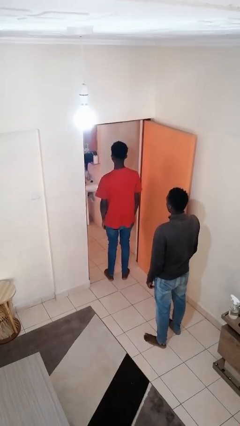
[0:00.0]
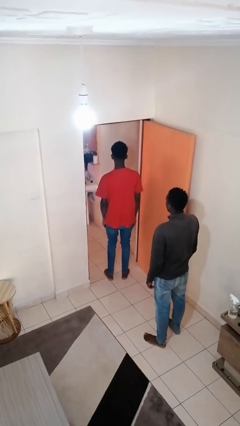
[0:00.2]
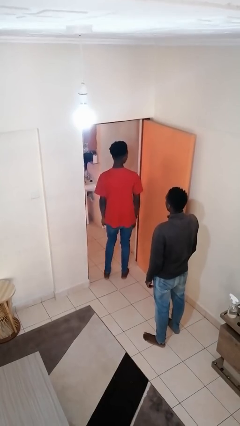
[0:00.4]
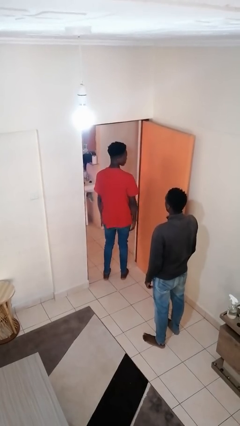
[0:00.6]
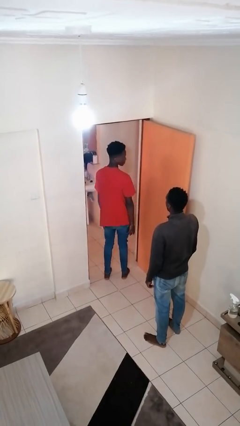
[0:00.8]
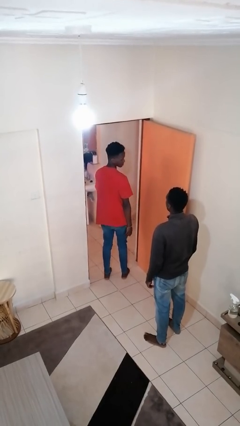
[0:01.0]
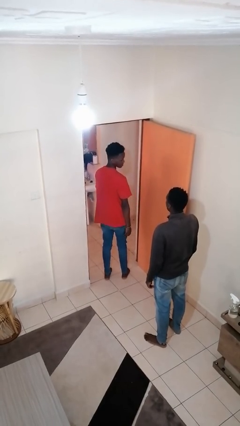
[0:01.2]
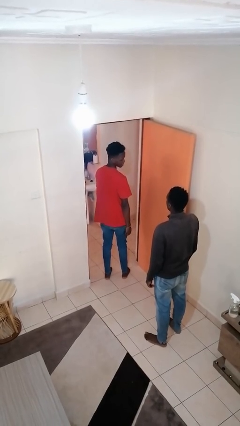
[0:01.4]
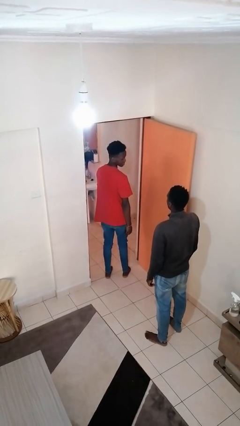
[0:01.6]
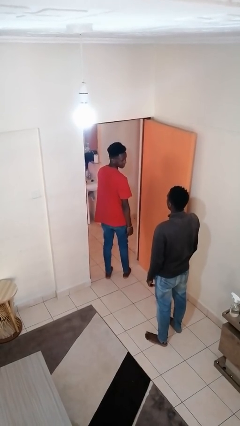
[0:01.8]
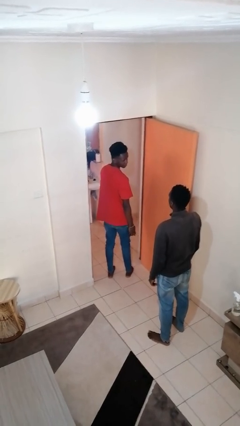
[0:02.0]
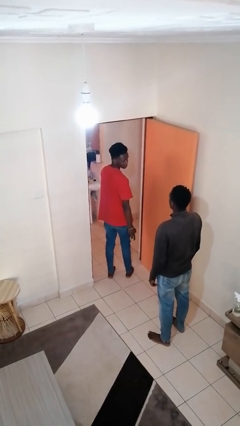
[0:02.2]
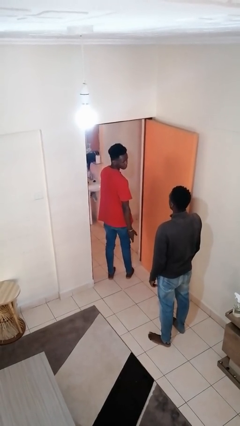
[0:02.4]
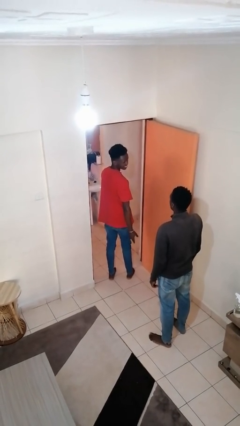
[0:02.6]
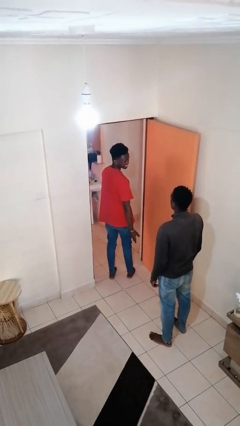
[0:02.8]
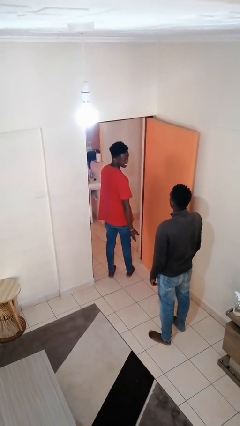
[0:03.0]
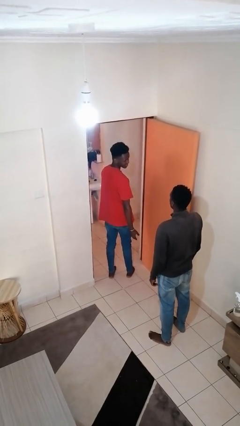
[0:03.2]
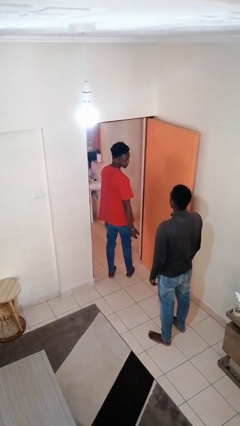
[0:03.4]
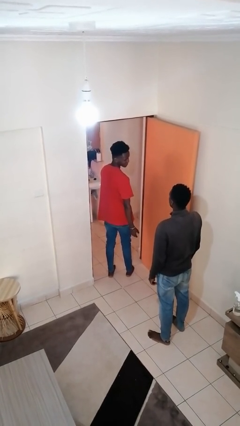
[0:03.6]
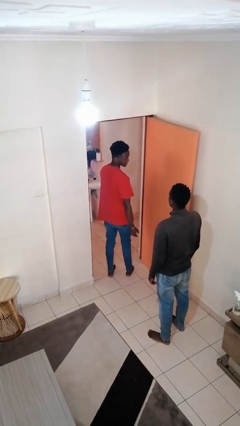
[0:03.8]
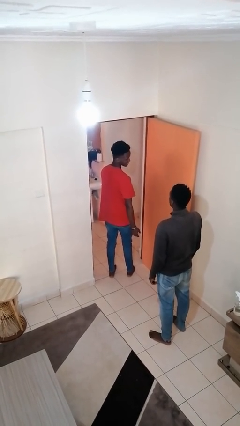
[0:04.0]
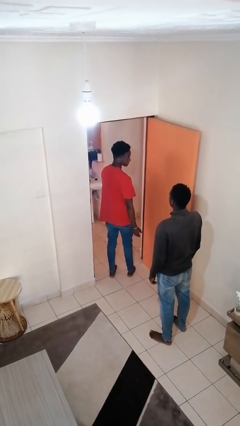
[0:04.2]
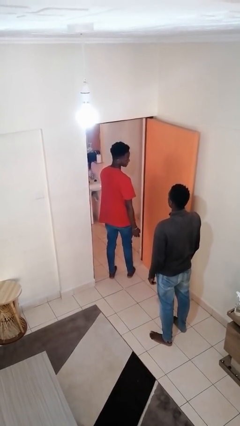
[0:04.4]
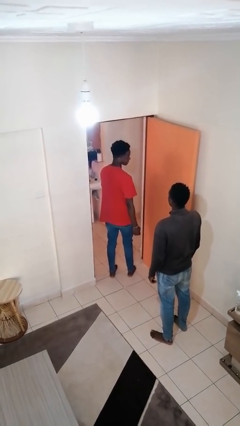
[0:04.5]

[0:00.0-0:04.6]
person looks over shoulder

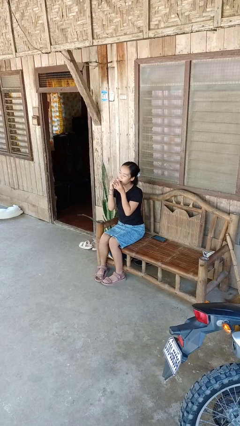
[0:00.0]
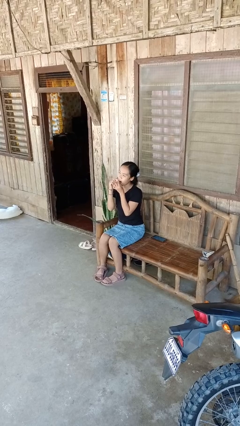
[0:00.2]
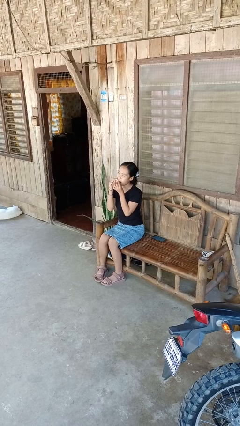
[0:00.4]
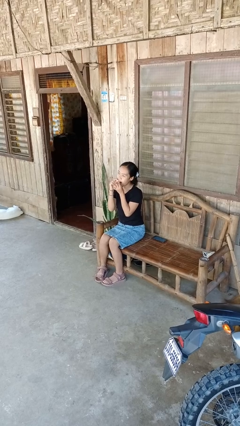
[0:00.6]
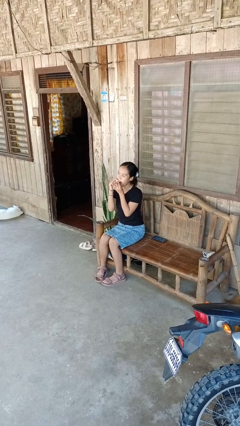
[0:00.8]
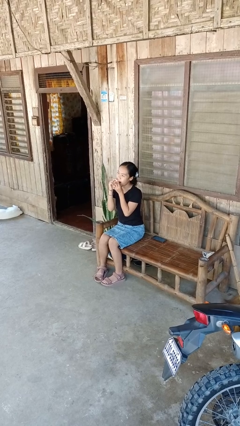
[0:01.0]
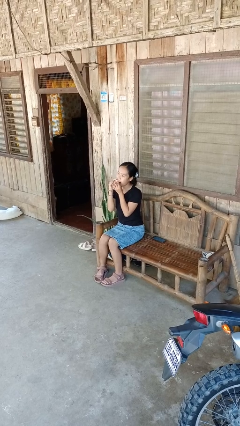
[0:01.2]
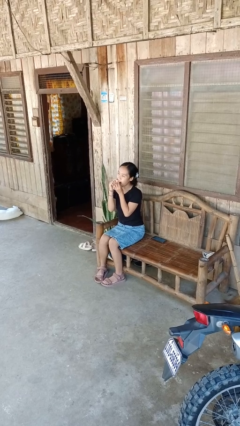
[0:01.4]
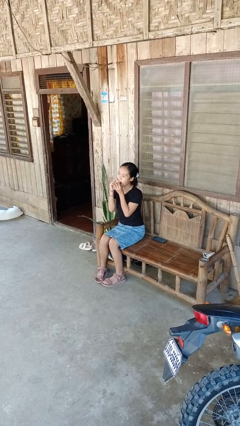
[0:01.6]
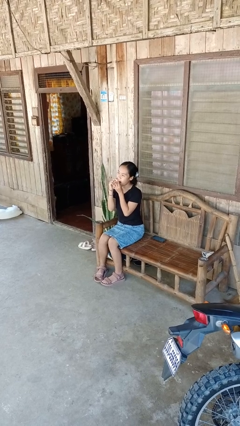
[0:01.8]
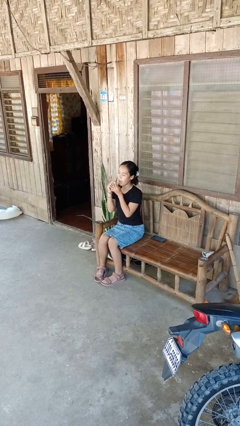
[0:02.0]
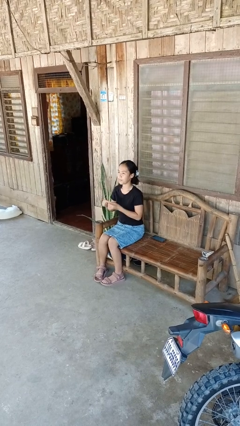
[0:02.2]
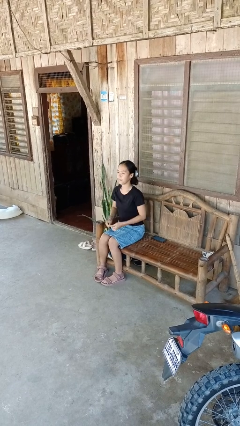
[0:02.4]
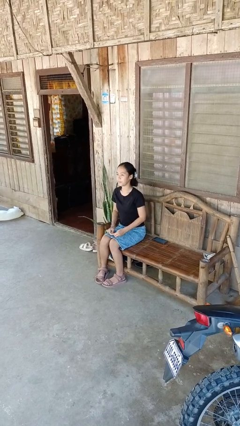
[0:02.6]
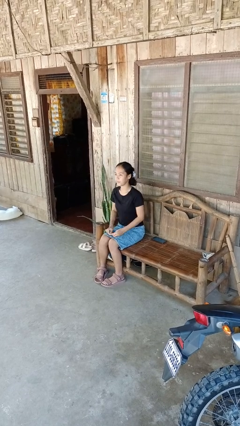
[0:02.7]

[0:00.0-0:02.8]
person flosses

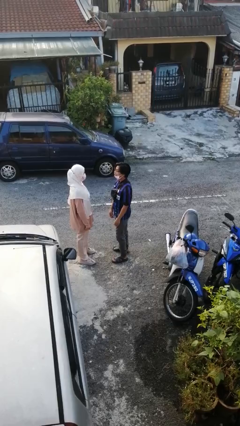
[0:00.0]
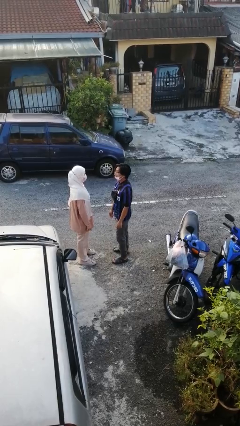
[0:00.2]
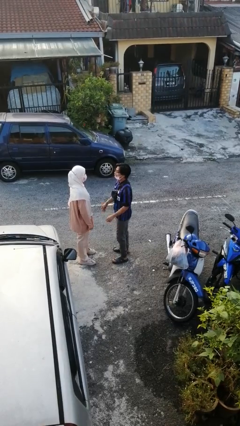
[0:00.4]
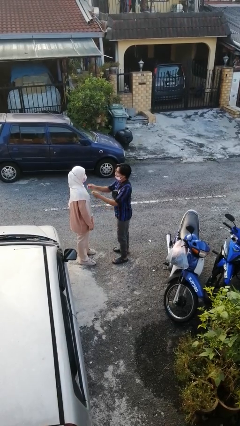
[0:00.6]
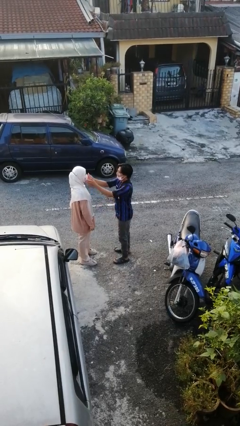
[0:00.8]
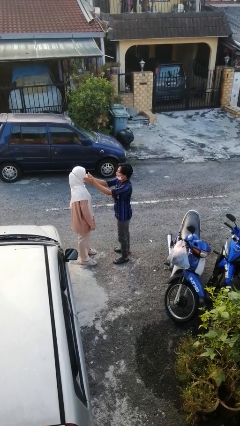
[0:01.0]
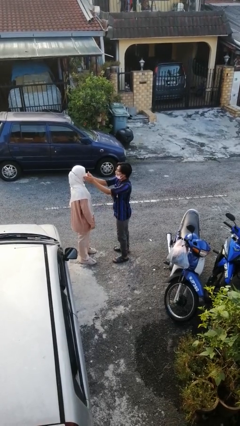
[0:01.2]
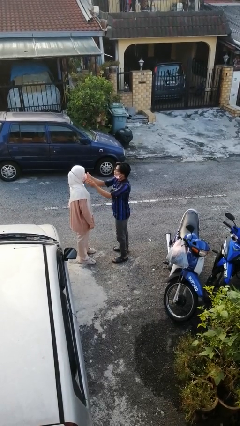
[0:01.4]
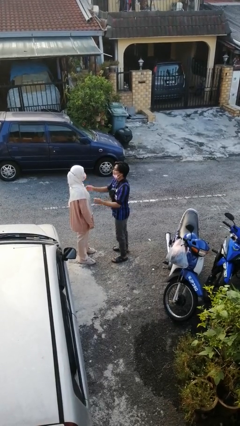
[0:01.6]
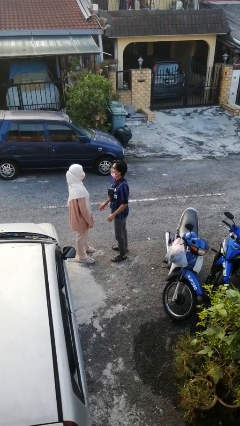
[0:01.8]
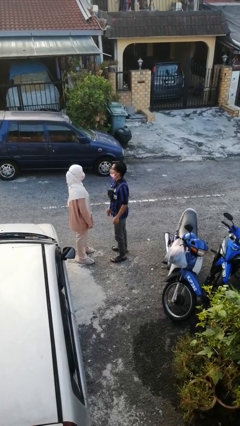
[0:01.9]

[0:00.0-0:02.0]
person touches face of person

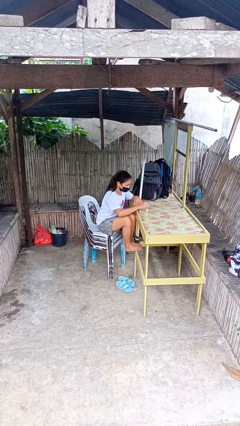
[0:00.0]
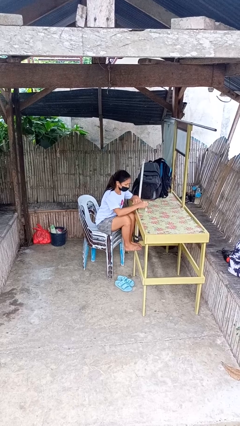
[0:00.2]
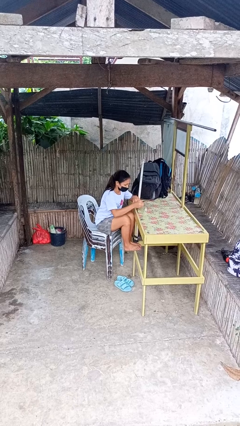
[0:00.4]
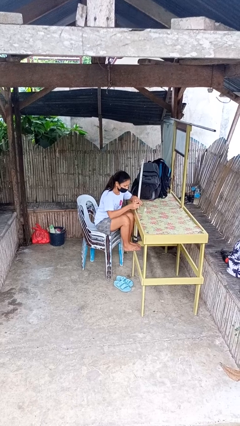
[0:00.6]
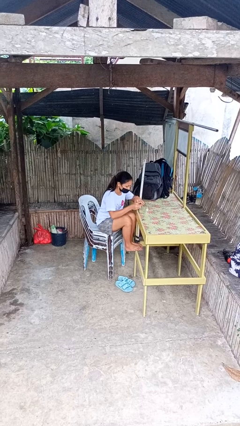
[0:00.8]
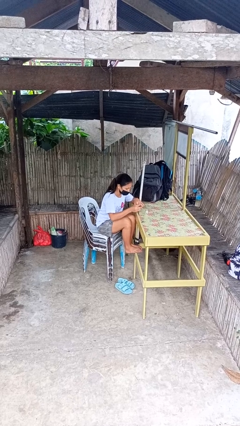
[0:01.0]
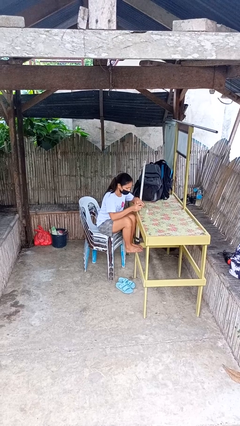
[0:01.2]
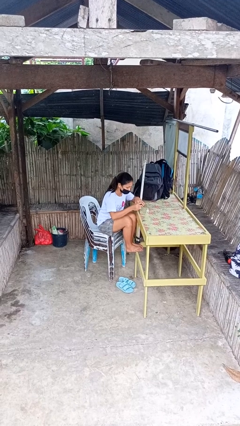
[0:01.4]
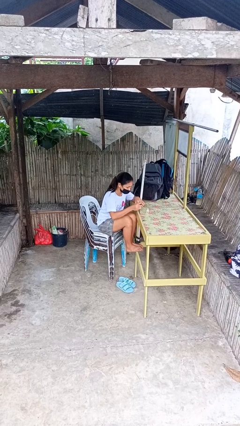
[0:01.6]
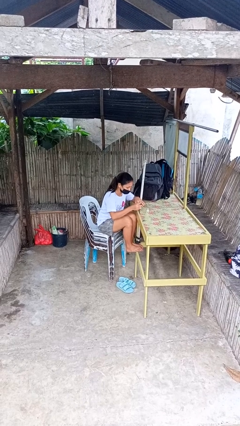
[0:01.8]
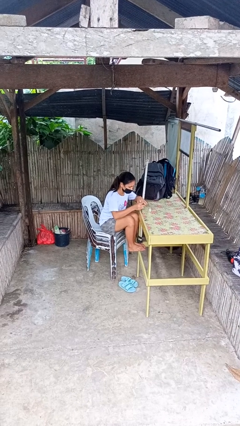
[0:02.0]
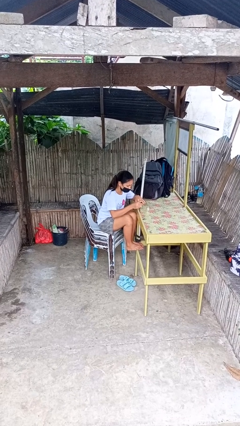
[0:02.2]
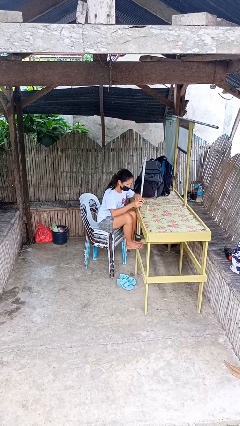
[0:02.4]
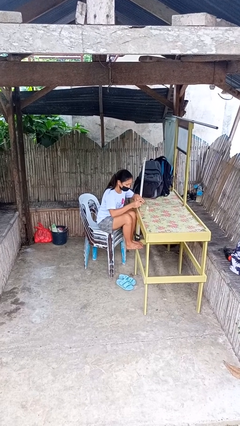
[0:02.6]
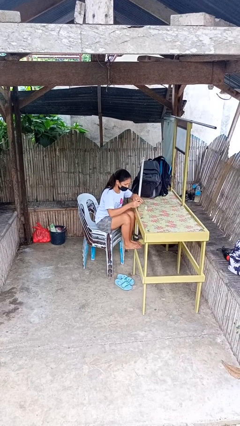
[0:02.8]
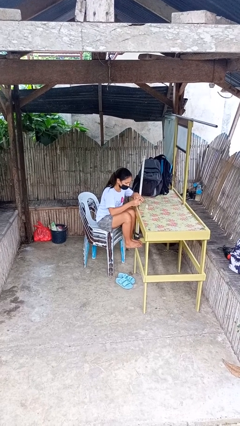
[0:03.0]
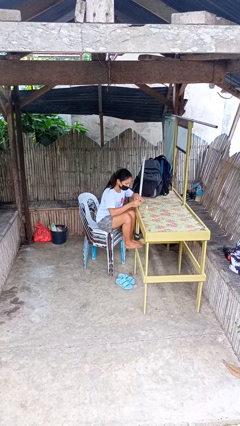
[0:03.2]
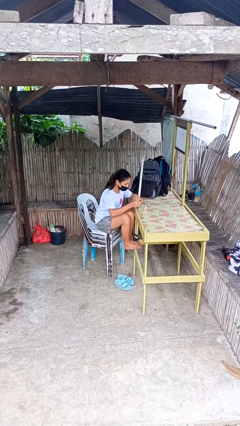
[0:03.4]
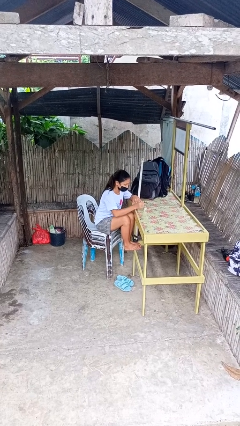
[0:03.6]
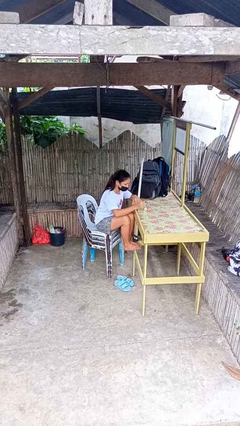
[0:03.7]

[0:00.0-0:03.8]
person paints fingernails

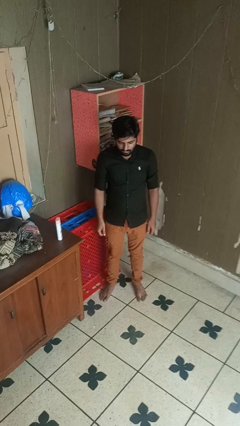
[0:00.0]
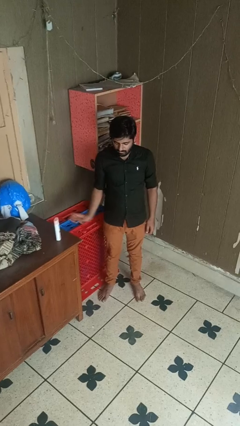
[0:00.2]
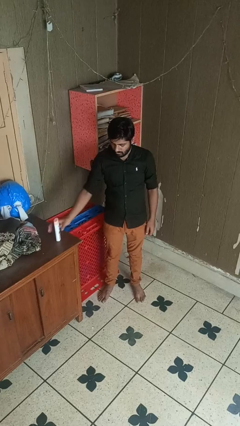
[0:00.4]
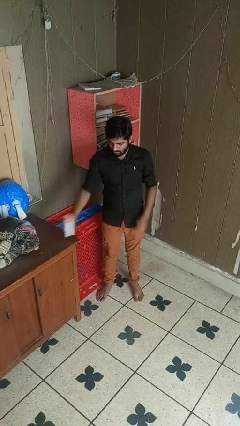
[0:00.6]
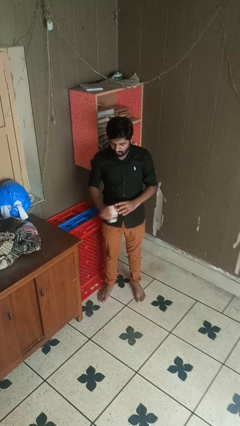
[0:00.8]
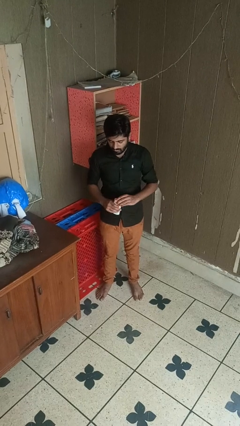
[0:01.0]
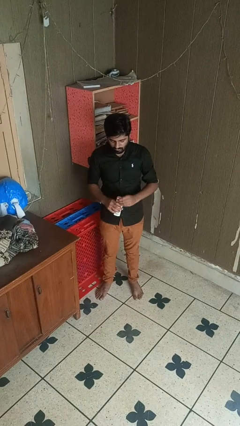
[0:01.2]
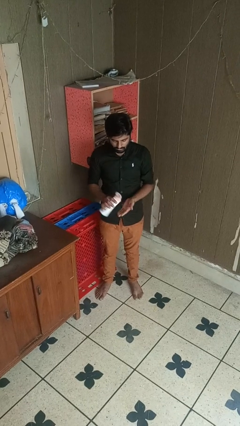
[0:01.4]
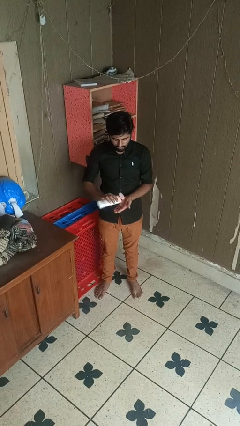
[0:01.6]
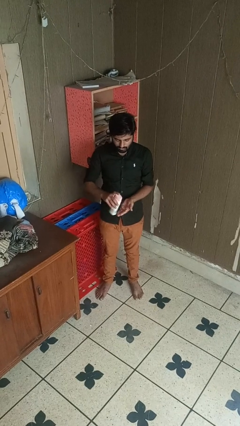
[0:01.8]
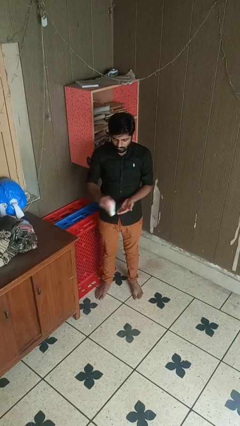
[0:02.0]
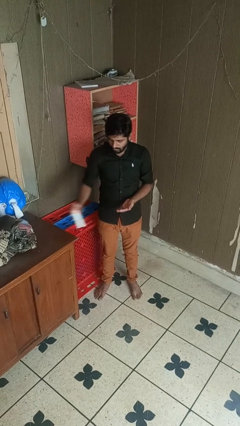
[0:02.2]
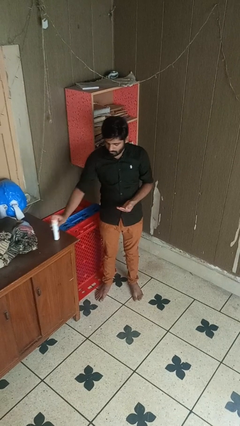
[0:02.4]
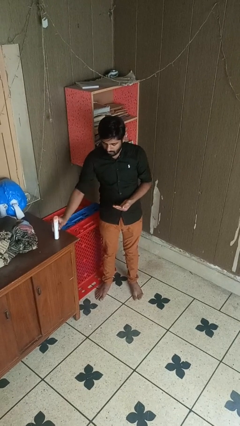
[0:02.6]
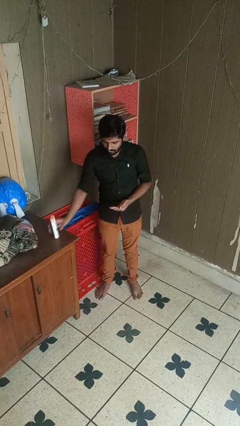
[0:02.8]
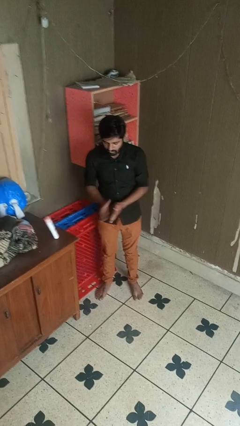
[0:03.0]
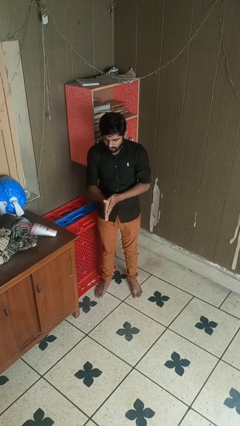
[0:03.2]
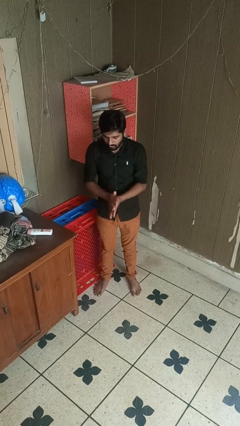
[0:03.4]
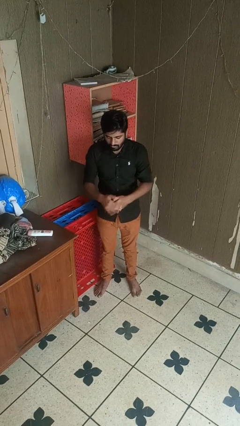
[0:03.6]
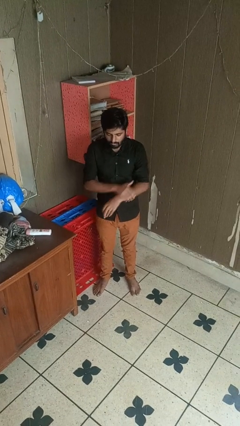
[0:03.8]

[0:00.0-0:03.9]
person applies facial moisturizer

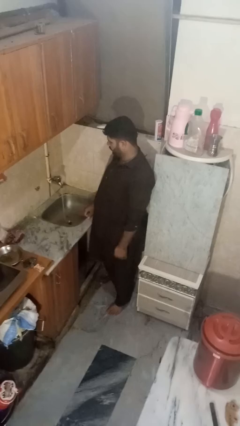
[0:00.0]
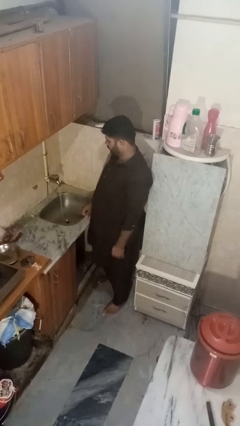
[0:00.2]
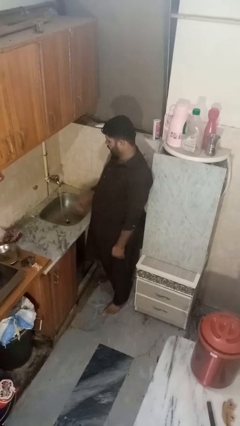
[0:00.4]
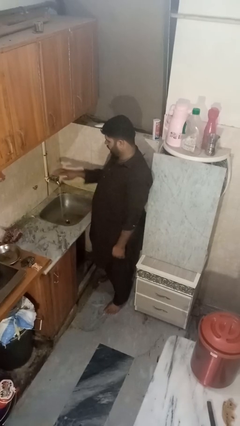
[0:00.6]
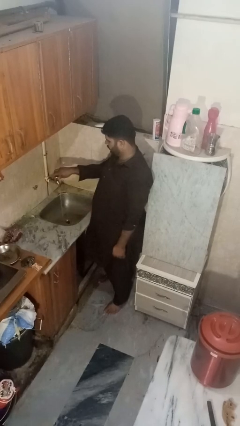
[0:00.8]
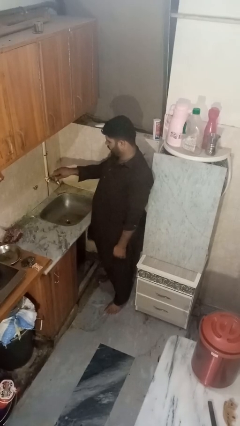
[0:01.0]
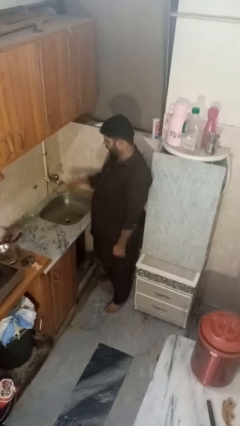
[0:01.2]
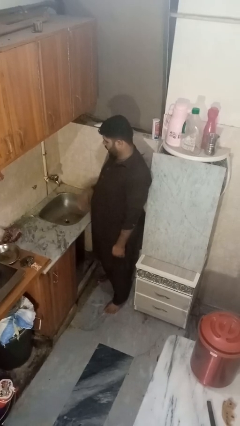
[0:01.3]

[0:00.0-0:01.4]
person turns off faucet
